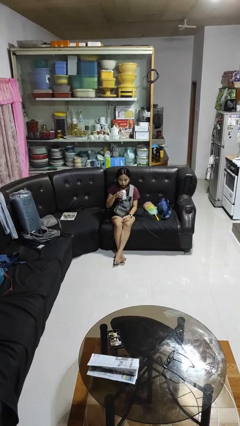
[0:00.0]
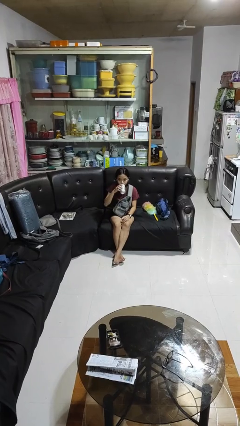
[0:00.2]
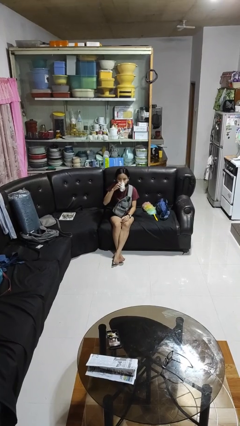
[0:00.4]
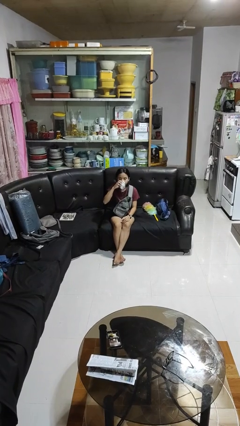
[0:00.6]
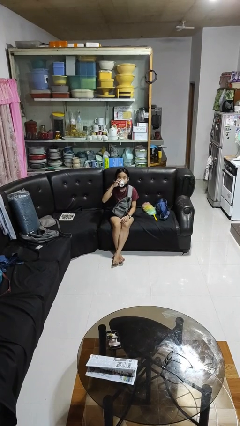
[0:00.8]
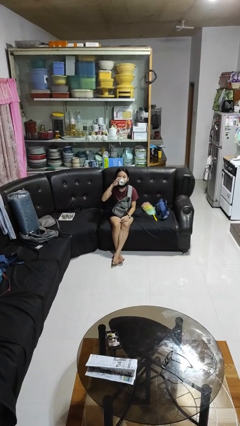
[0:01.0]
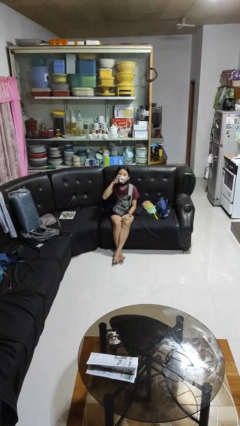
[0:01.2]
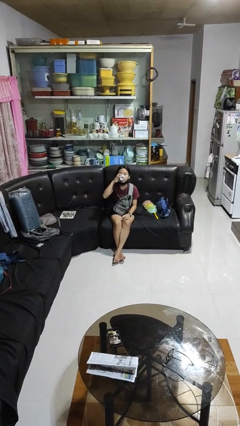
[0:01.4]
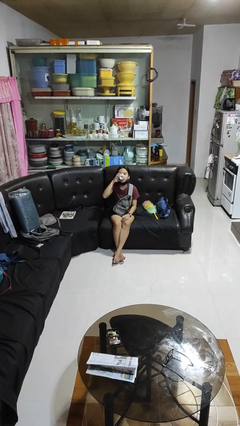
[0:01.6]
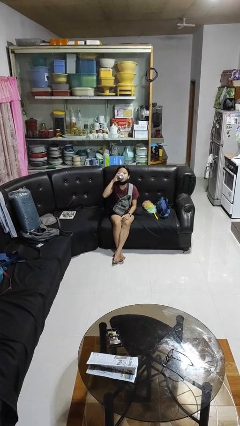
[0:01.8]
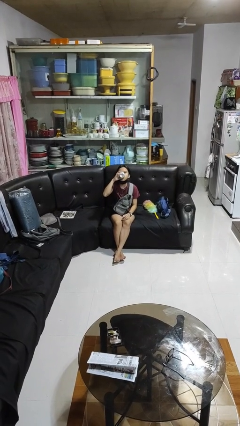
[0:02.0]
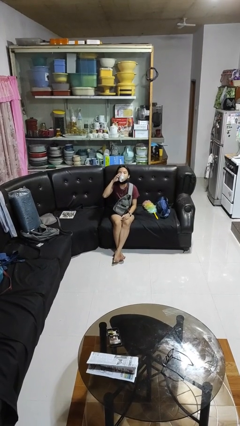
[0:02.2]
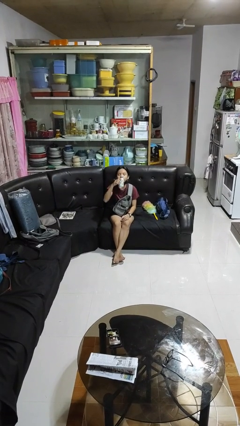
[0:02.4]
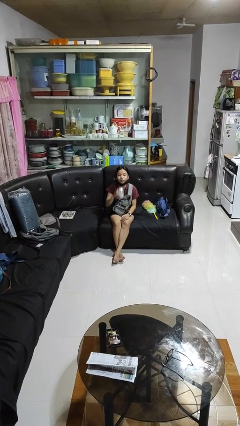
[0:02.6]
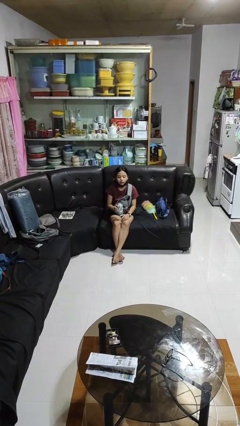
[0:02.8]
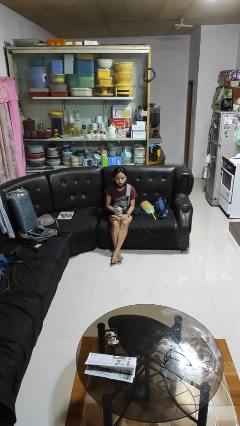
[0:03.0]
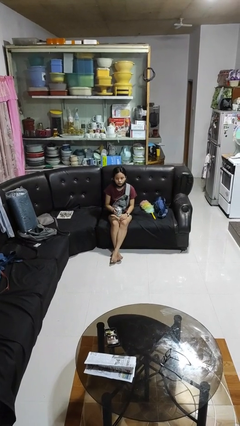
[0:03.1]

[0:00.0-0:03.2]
person drinks from beverage can

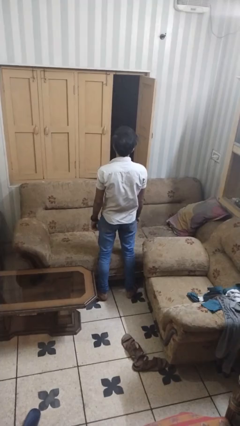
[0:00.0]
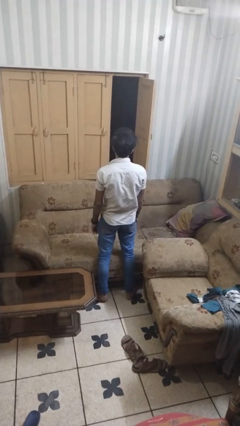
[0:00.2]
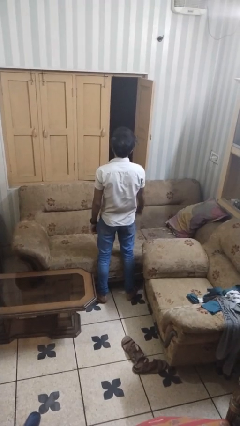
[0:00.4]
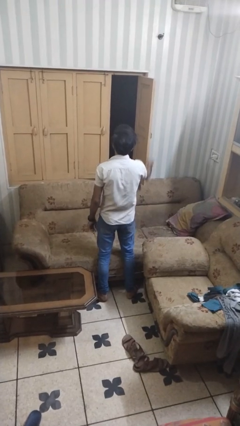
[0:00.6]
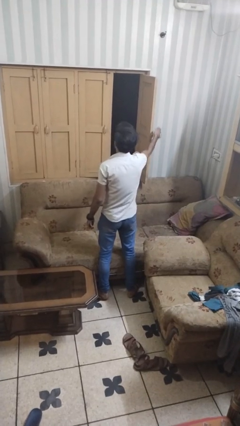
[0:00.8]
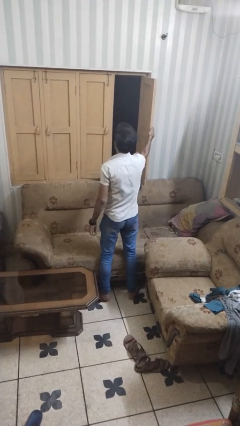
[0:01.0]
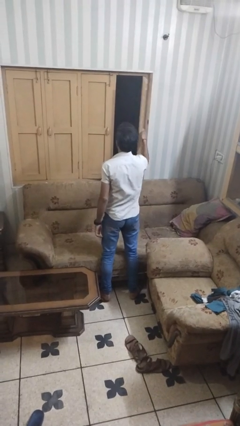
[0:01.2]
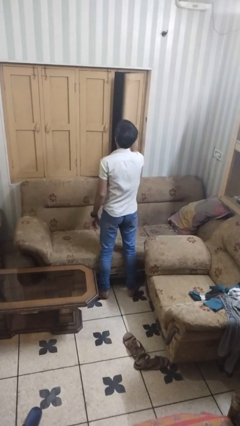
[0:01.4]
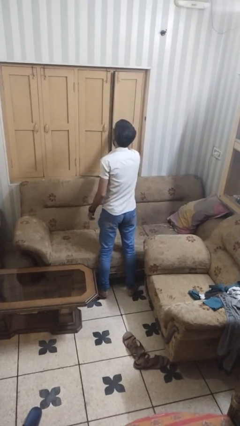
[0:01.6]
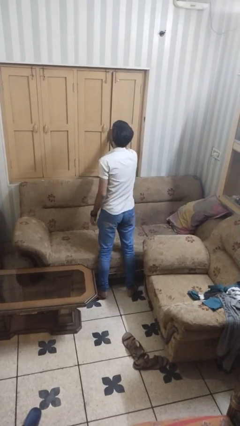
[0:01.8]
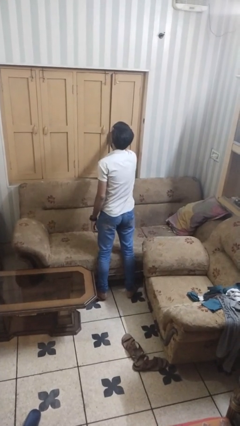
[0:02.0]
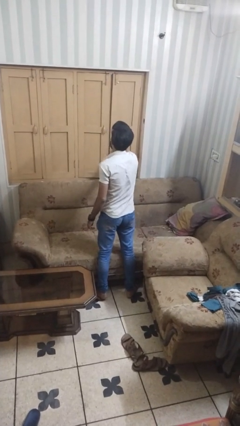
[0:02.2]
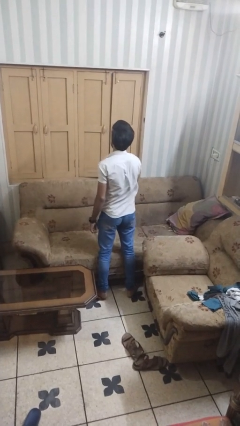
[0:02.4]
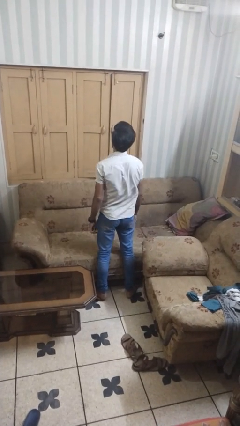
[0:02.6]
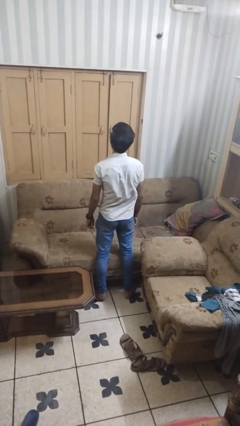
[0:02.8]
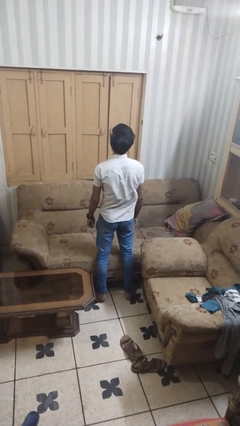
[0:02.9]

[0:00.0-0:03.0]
person closes home window

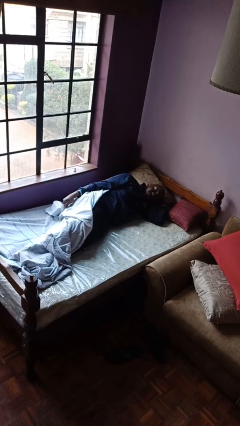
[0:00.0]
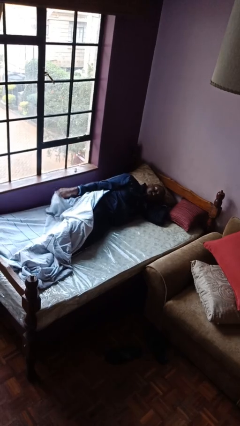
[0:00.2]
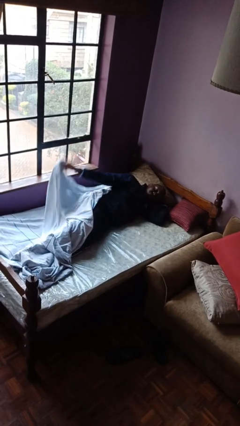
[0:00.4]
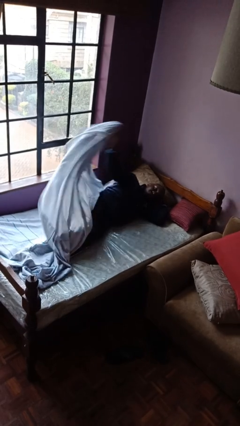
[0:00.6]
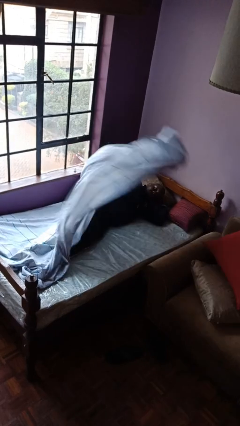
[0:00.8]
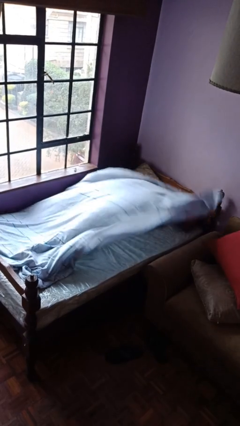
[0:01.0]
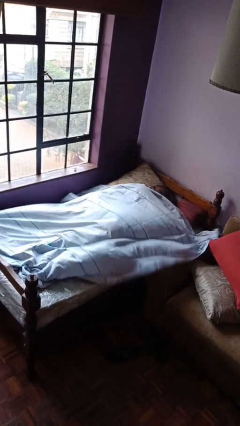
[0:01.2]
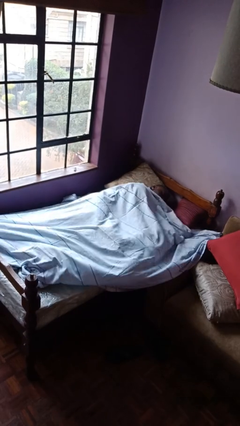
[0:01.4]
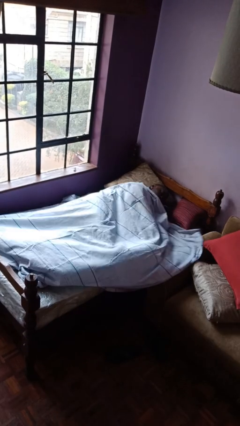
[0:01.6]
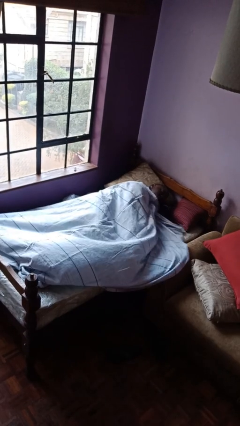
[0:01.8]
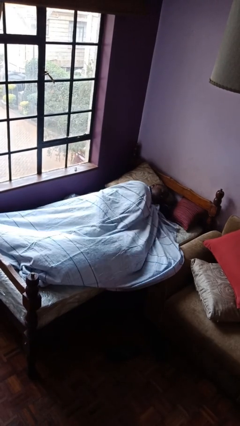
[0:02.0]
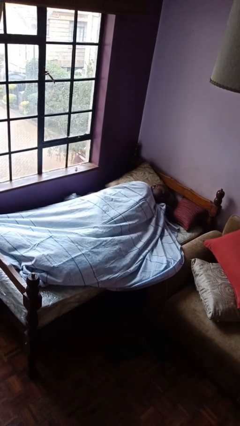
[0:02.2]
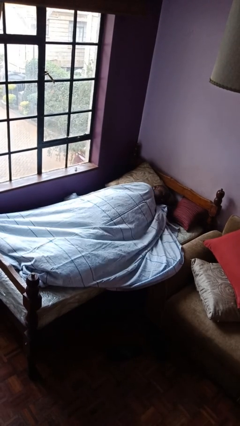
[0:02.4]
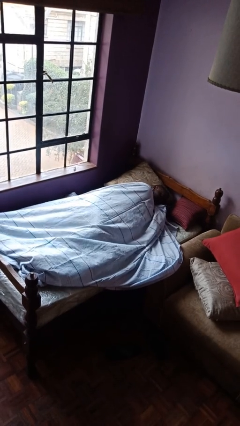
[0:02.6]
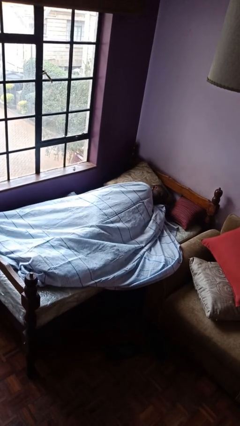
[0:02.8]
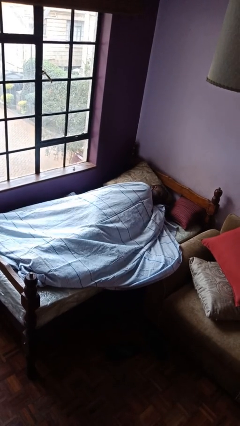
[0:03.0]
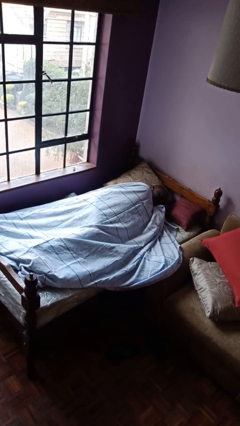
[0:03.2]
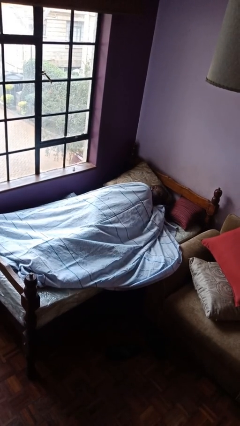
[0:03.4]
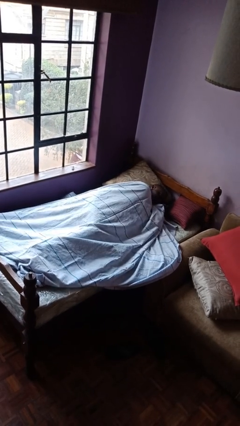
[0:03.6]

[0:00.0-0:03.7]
person covers with bedsheets

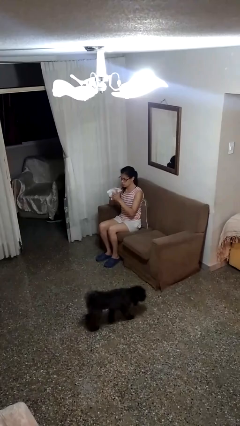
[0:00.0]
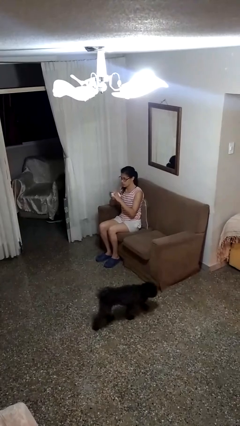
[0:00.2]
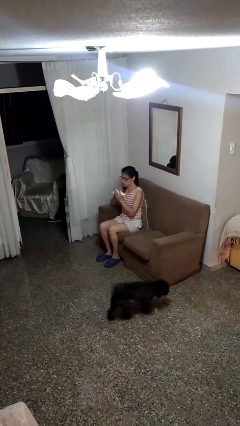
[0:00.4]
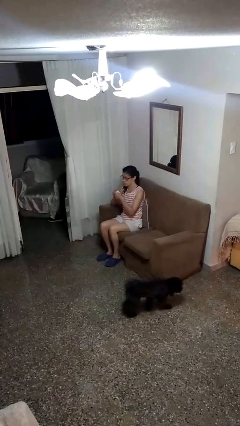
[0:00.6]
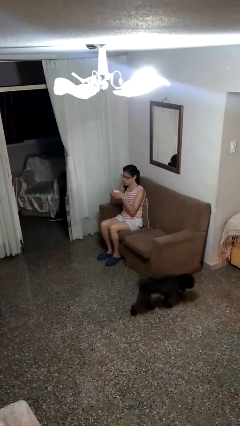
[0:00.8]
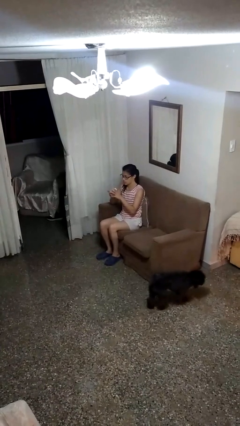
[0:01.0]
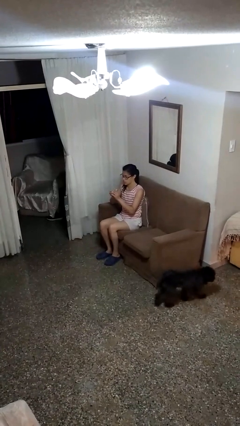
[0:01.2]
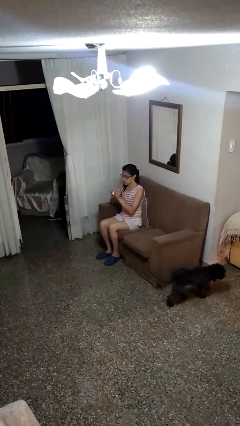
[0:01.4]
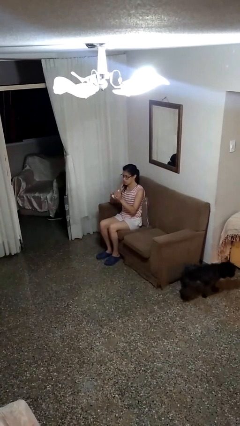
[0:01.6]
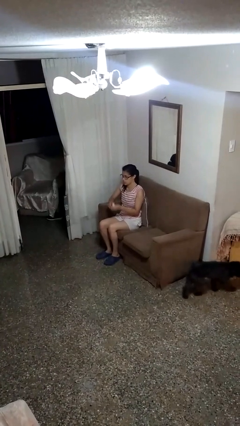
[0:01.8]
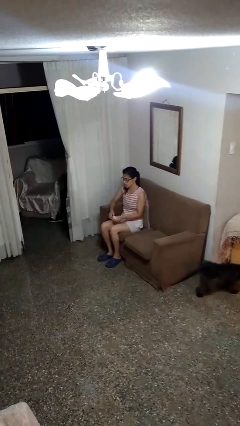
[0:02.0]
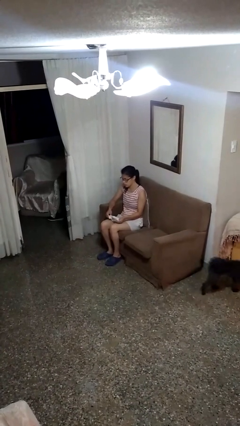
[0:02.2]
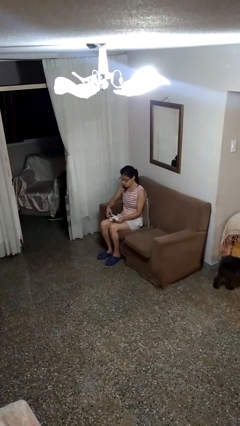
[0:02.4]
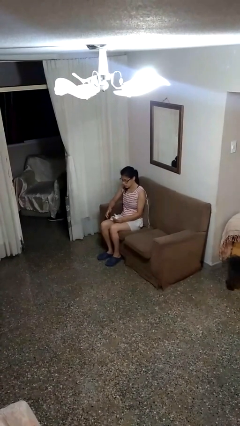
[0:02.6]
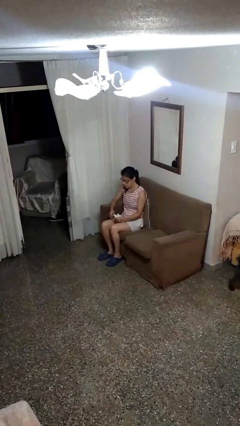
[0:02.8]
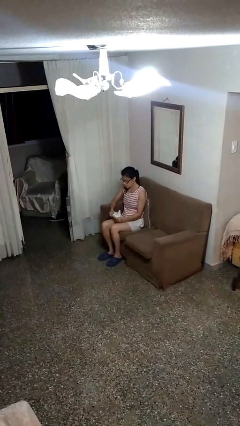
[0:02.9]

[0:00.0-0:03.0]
person crumples paper

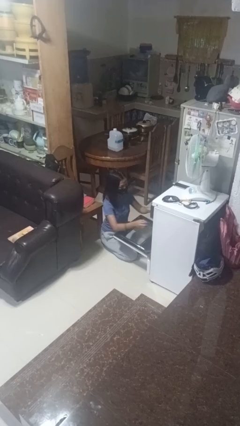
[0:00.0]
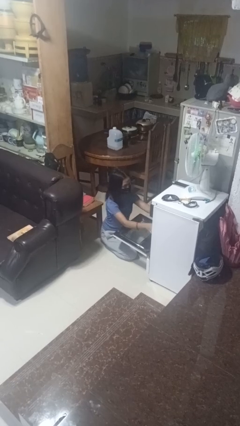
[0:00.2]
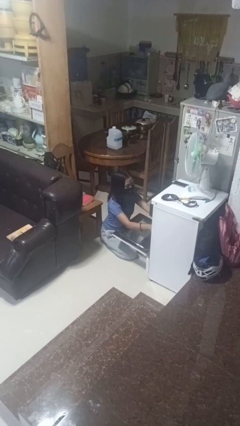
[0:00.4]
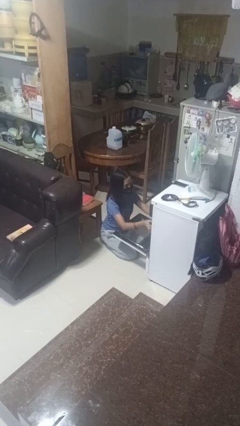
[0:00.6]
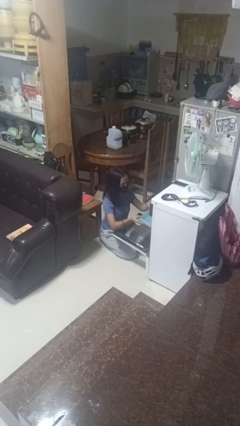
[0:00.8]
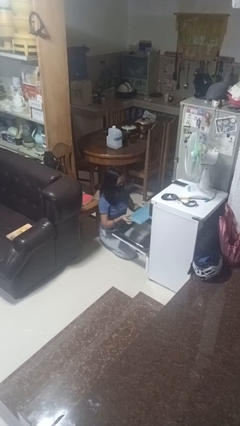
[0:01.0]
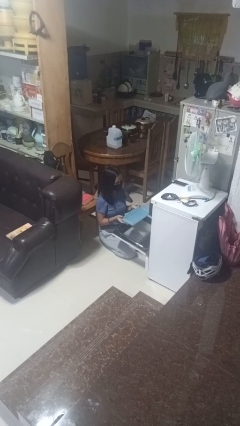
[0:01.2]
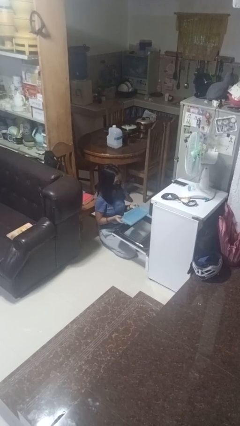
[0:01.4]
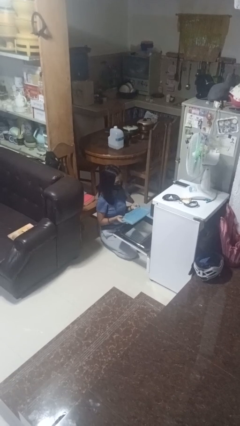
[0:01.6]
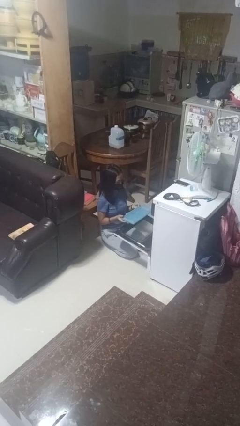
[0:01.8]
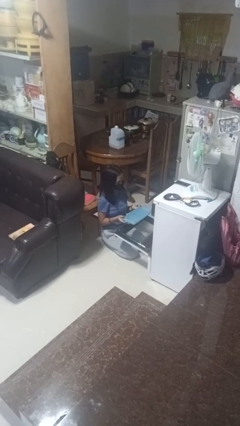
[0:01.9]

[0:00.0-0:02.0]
person takes object from oven

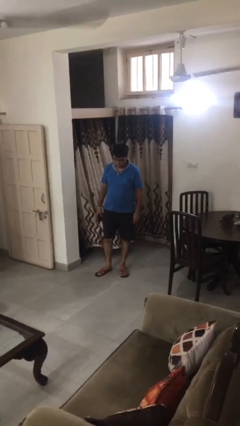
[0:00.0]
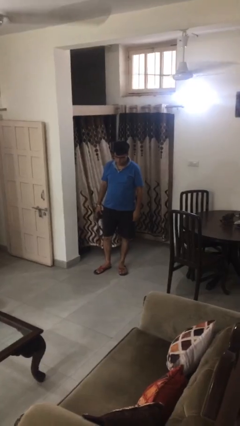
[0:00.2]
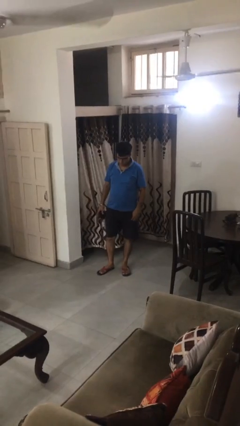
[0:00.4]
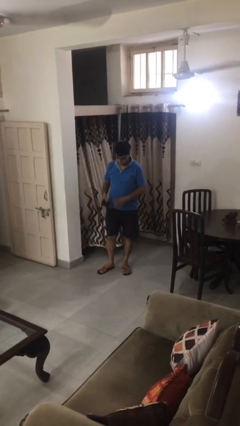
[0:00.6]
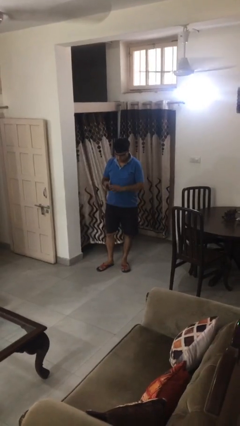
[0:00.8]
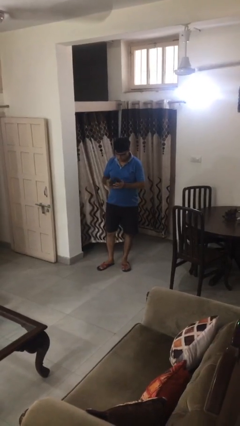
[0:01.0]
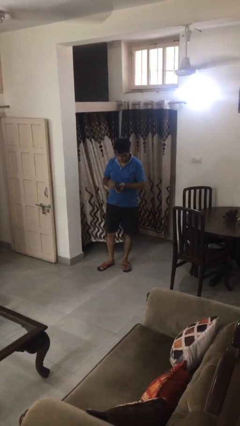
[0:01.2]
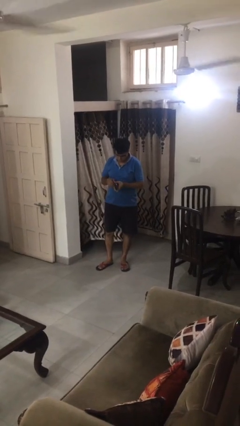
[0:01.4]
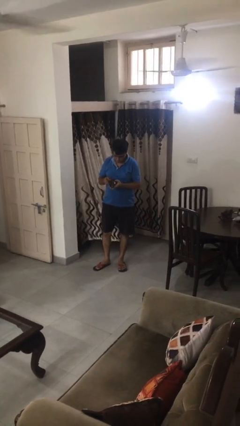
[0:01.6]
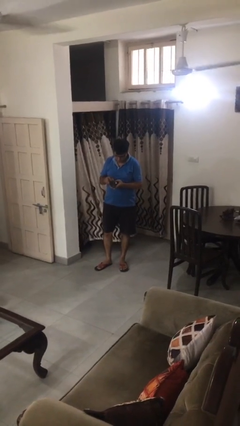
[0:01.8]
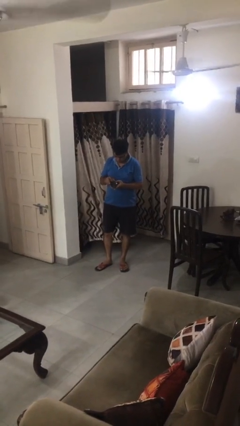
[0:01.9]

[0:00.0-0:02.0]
person searches in purse

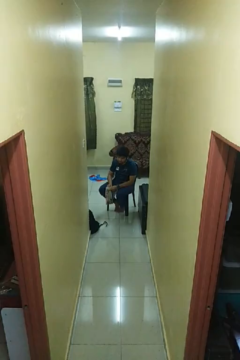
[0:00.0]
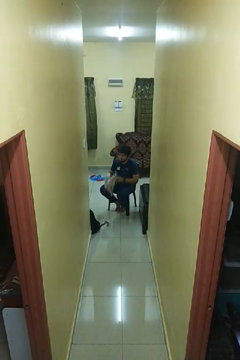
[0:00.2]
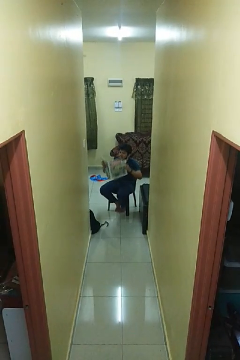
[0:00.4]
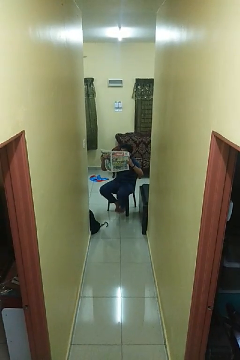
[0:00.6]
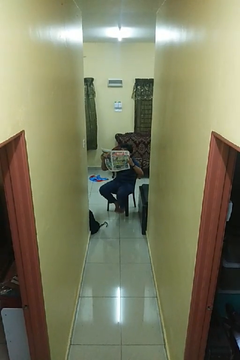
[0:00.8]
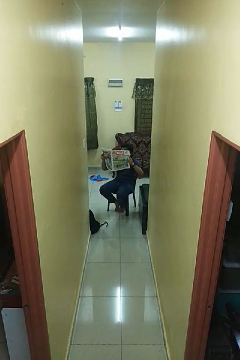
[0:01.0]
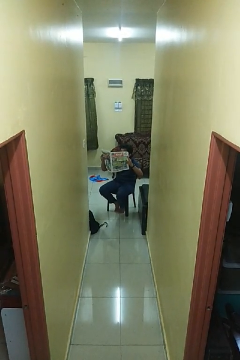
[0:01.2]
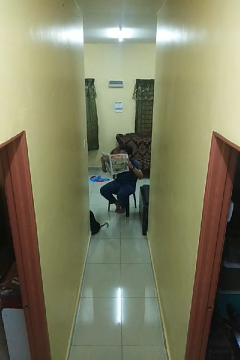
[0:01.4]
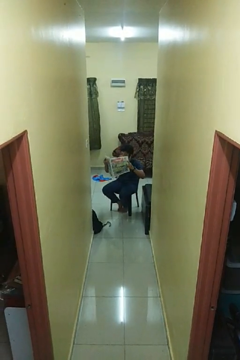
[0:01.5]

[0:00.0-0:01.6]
person reads newspaper
